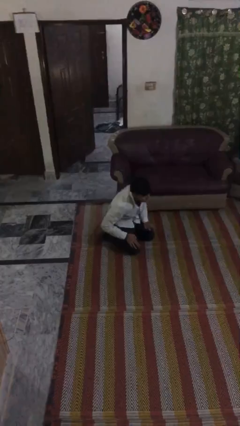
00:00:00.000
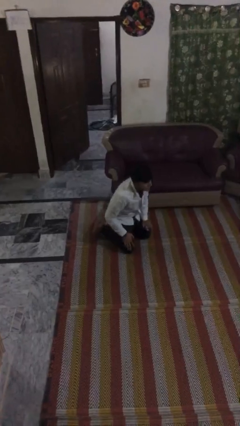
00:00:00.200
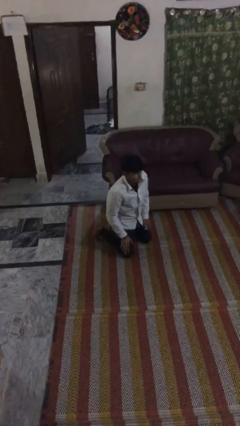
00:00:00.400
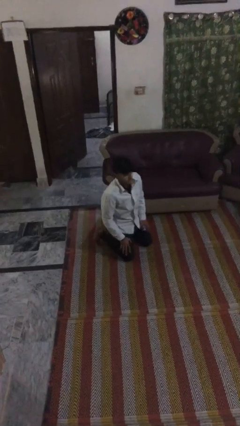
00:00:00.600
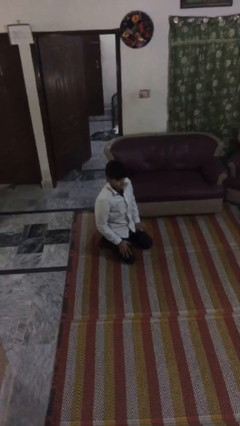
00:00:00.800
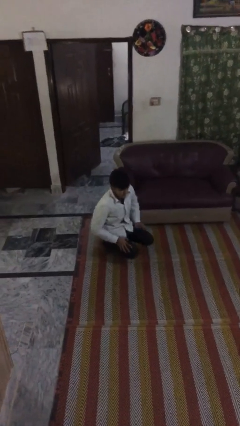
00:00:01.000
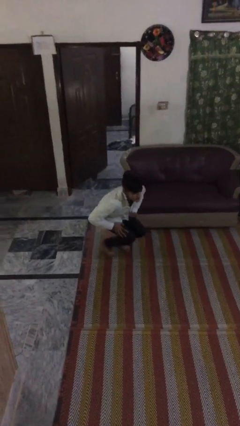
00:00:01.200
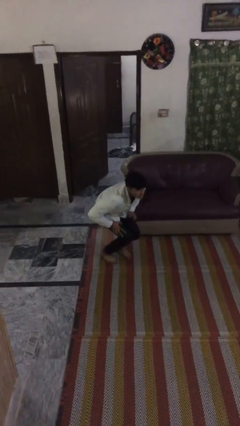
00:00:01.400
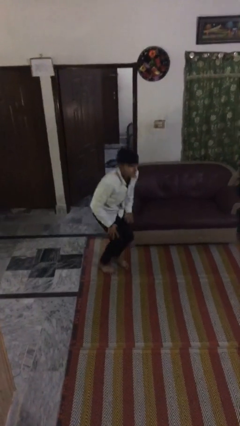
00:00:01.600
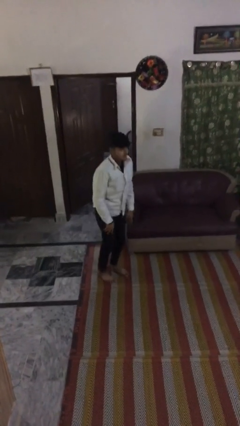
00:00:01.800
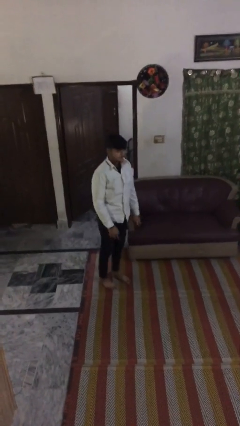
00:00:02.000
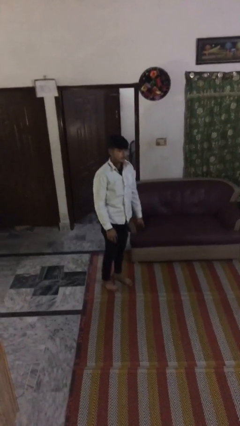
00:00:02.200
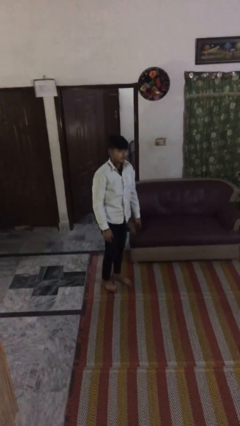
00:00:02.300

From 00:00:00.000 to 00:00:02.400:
person stands up

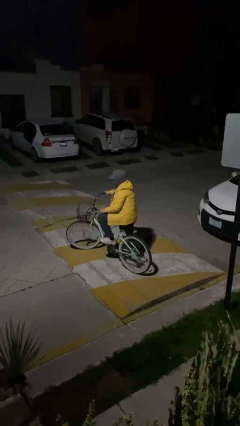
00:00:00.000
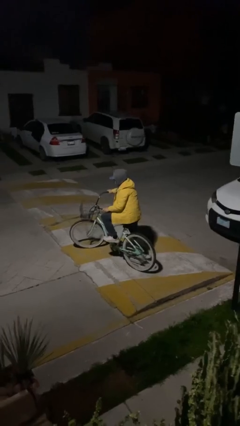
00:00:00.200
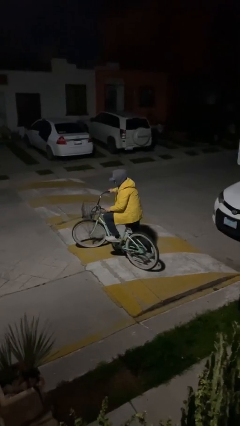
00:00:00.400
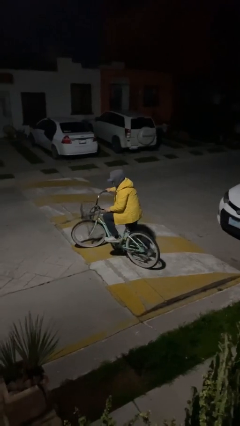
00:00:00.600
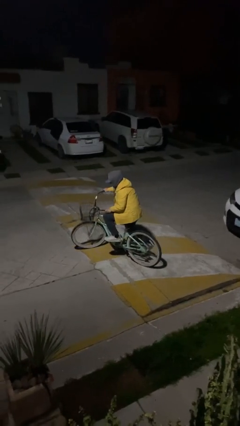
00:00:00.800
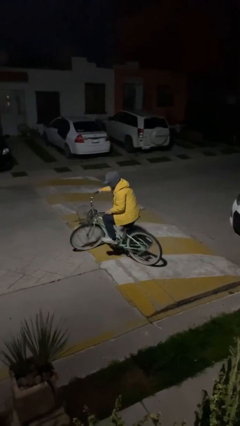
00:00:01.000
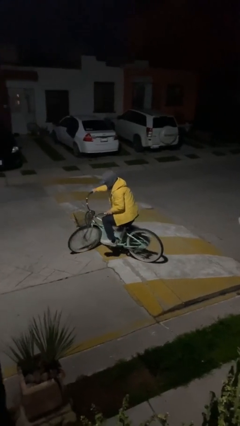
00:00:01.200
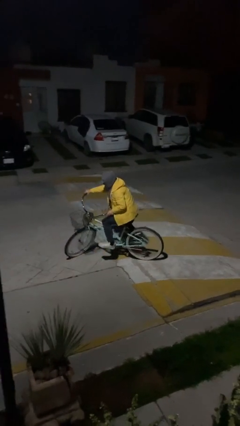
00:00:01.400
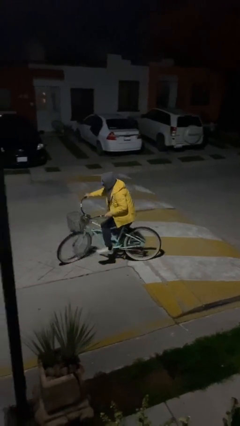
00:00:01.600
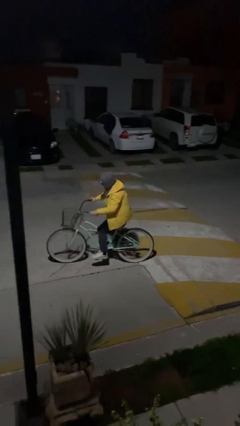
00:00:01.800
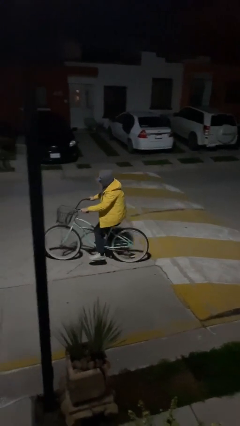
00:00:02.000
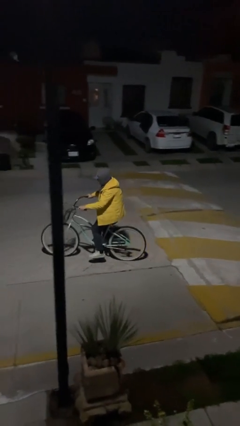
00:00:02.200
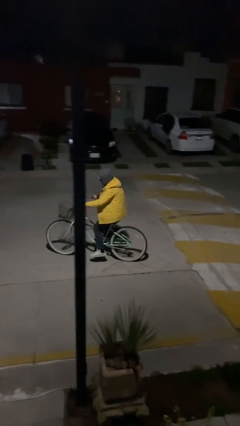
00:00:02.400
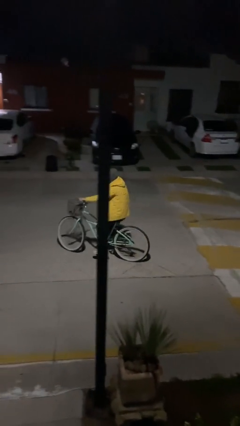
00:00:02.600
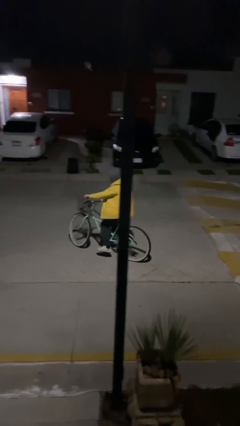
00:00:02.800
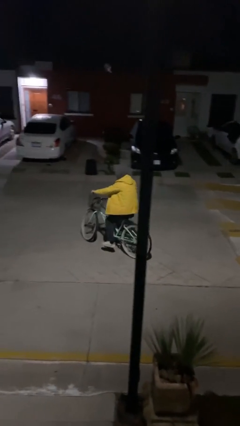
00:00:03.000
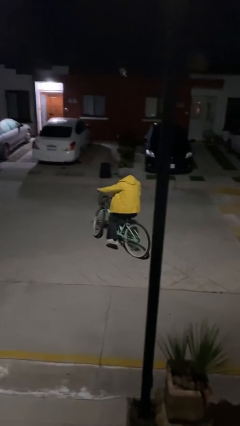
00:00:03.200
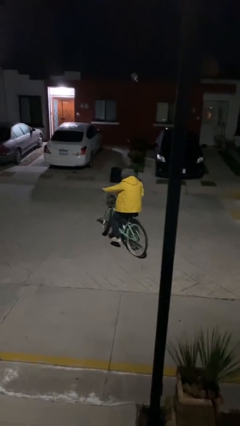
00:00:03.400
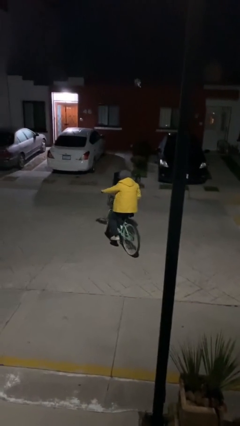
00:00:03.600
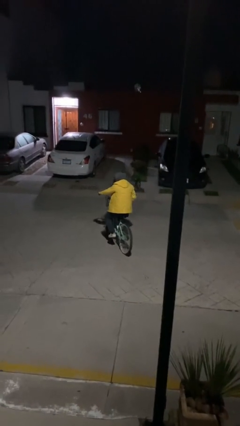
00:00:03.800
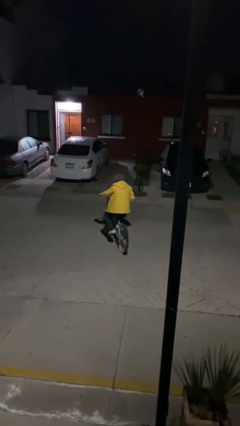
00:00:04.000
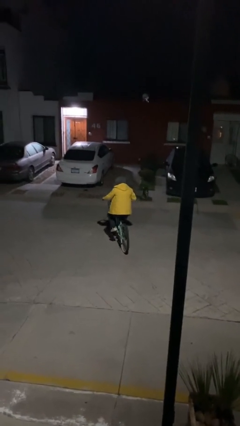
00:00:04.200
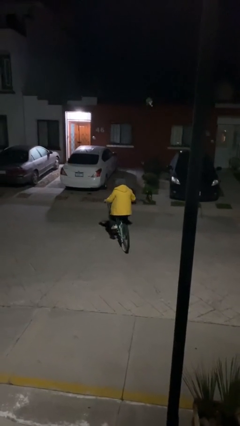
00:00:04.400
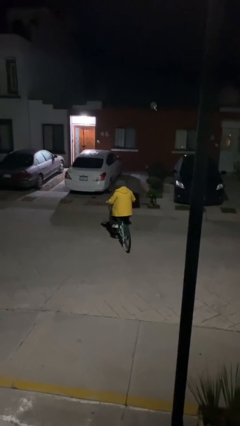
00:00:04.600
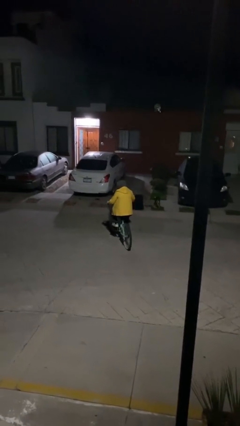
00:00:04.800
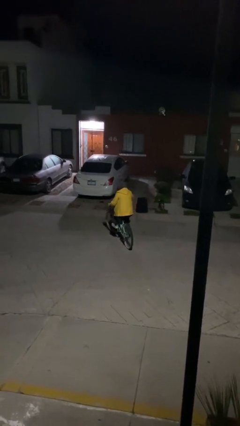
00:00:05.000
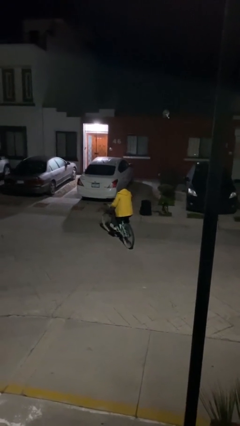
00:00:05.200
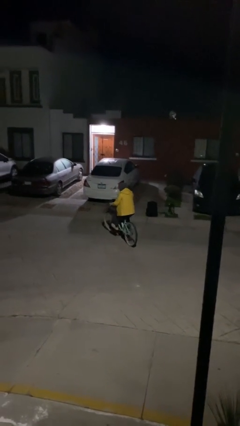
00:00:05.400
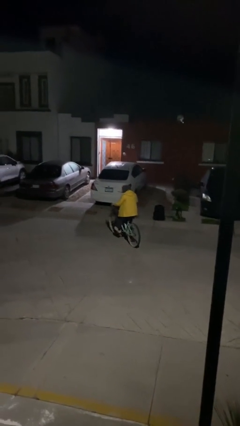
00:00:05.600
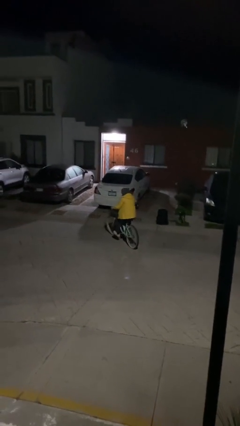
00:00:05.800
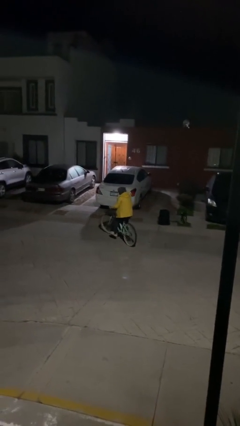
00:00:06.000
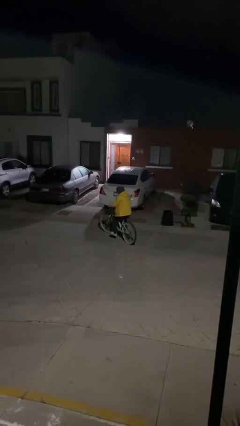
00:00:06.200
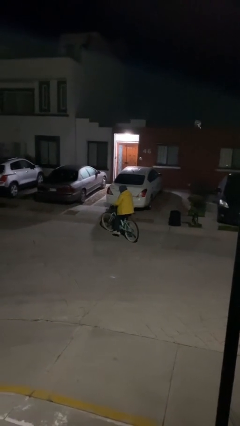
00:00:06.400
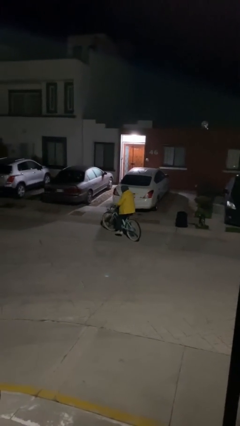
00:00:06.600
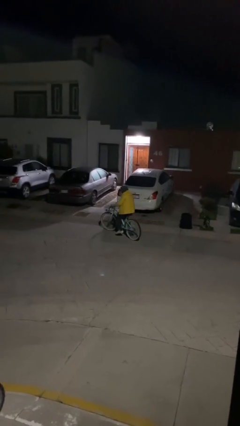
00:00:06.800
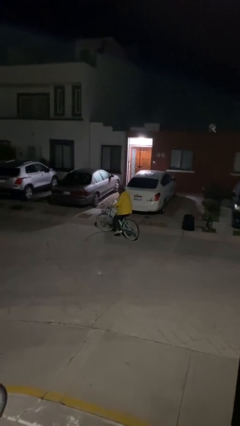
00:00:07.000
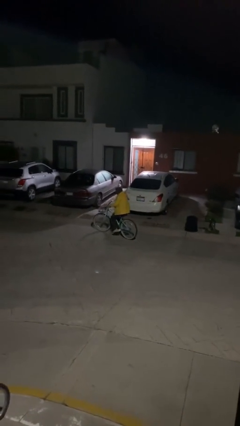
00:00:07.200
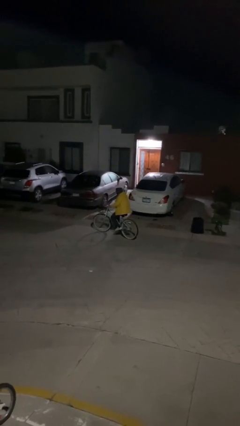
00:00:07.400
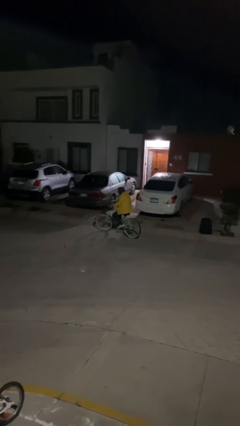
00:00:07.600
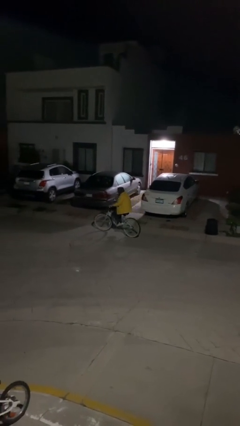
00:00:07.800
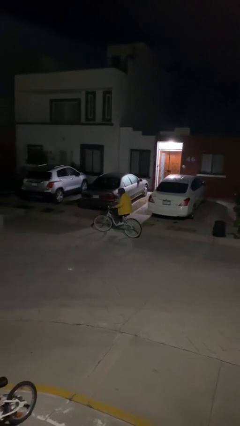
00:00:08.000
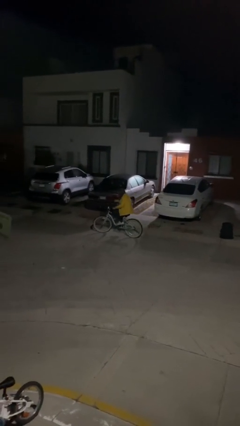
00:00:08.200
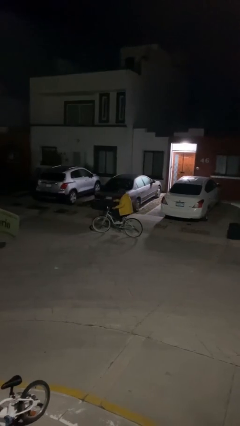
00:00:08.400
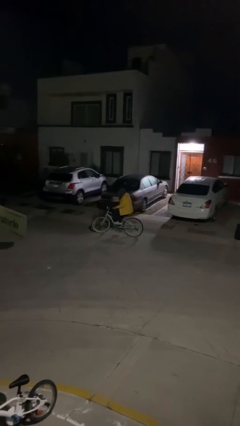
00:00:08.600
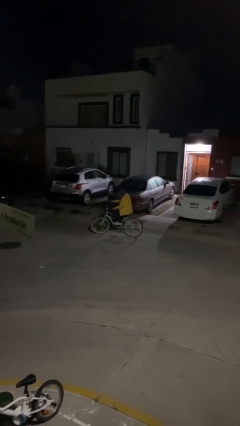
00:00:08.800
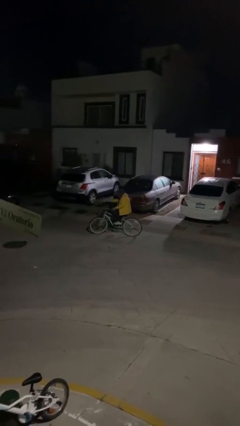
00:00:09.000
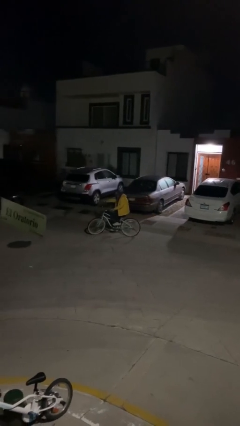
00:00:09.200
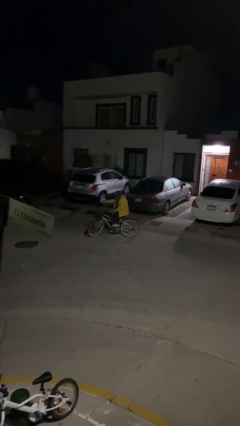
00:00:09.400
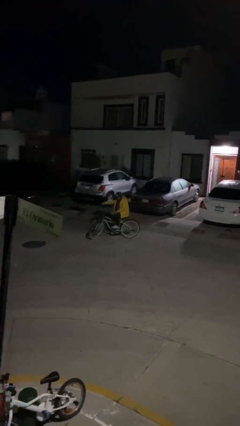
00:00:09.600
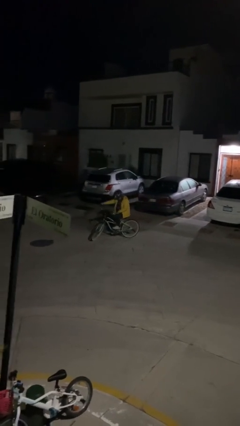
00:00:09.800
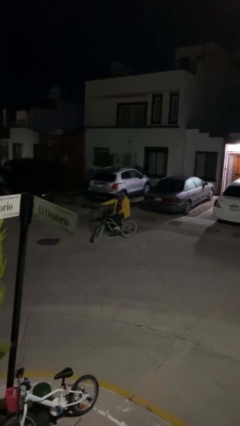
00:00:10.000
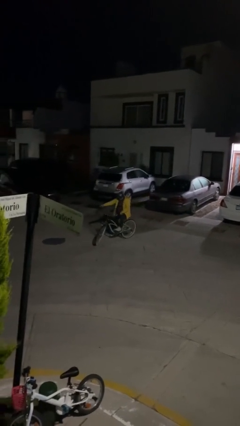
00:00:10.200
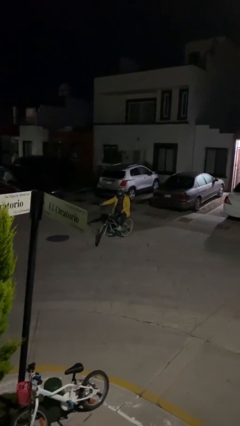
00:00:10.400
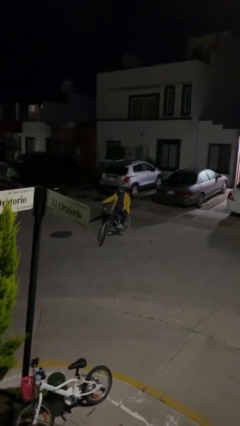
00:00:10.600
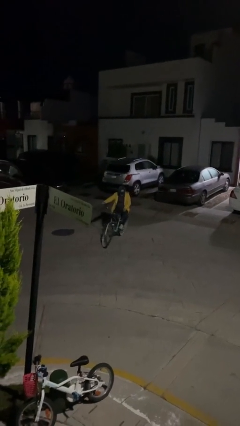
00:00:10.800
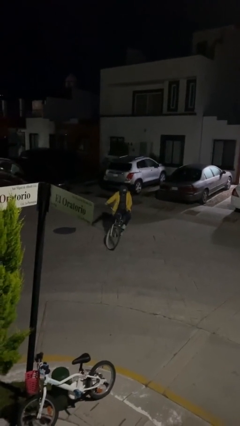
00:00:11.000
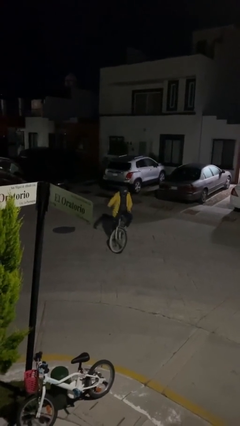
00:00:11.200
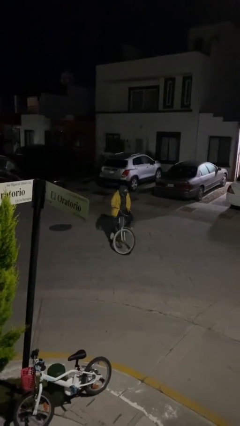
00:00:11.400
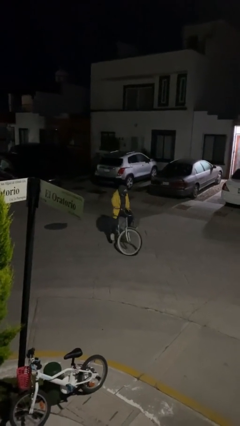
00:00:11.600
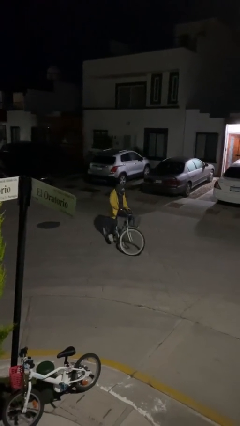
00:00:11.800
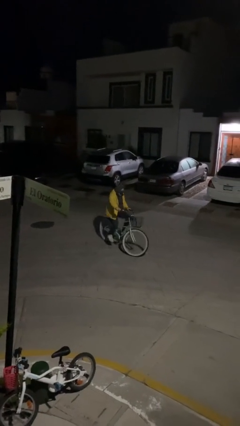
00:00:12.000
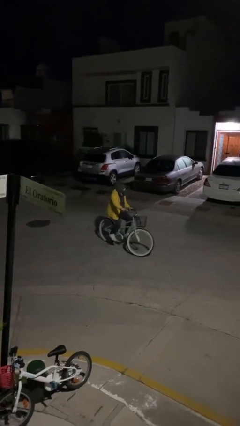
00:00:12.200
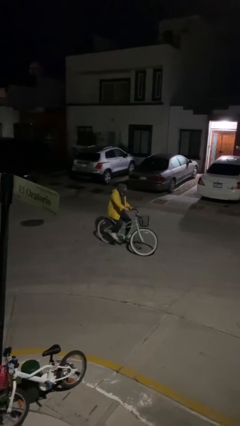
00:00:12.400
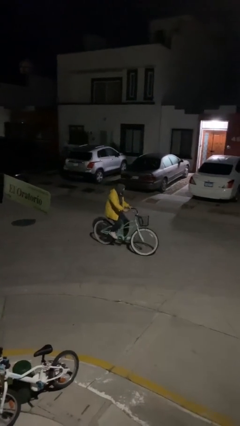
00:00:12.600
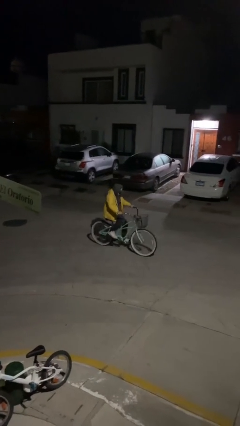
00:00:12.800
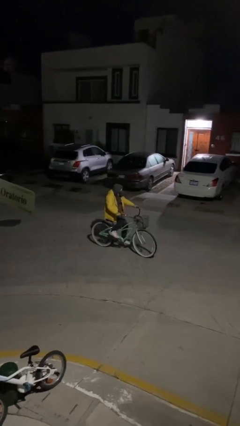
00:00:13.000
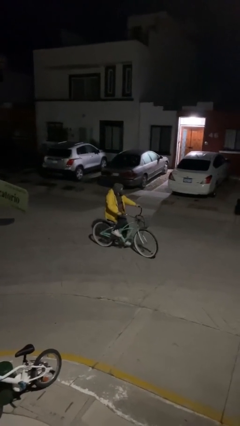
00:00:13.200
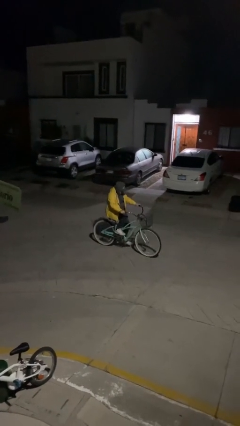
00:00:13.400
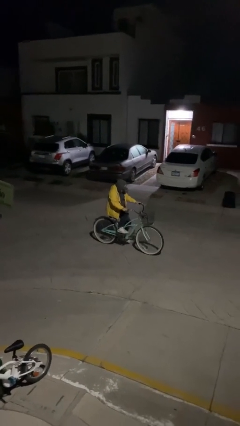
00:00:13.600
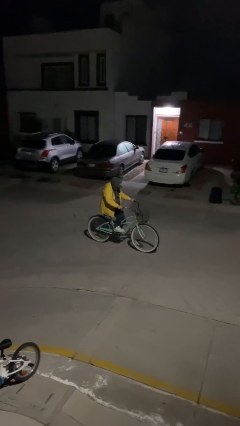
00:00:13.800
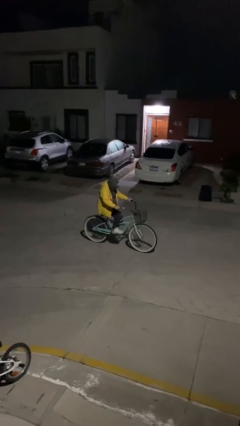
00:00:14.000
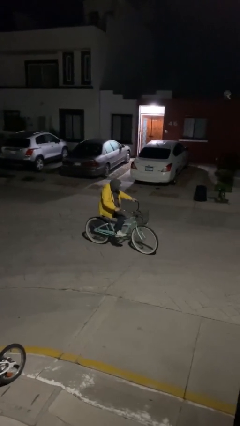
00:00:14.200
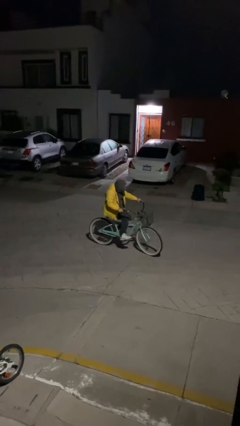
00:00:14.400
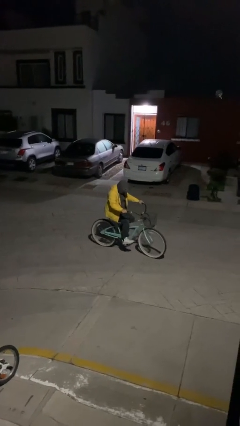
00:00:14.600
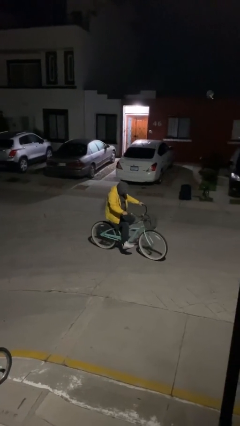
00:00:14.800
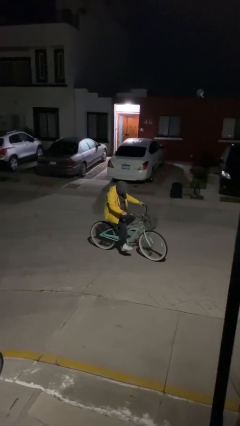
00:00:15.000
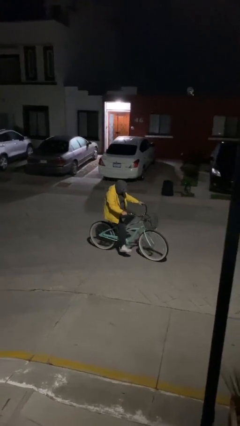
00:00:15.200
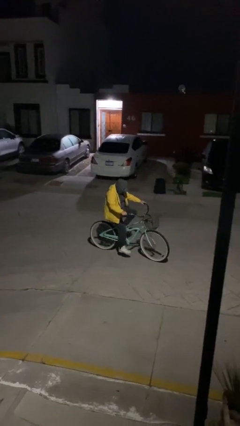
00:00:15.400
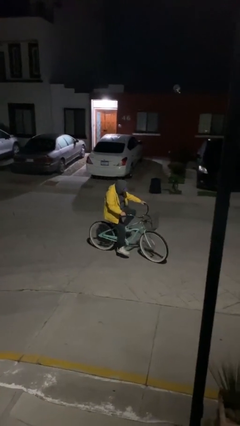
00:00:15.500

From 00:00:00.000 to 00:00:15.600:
person rides bicycle
